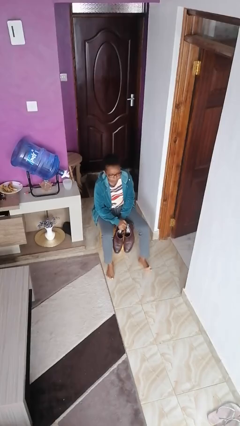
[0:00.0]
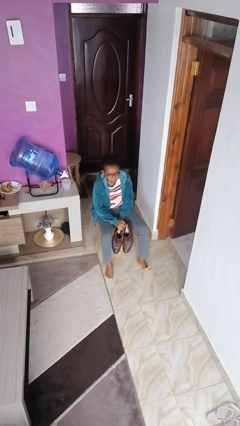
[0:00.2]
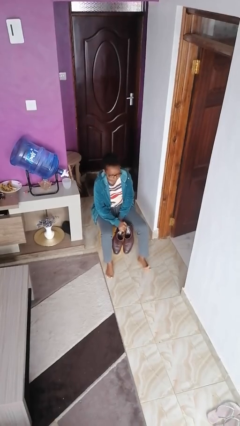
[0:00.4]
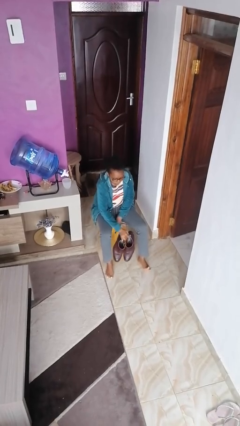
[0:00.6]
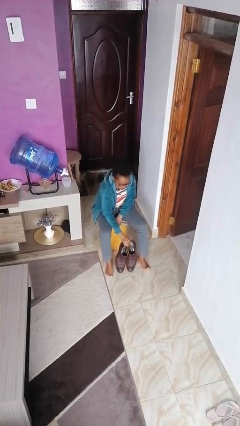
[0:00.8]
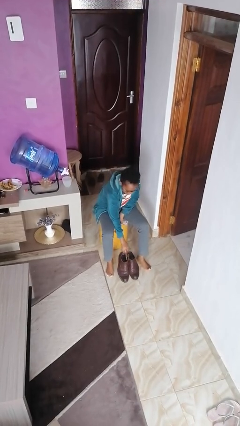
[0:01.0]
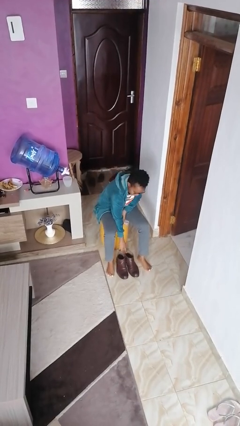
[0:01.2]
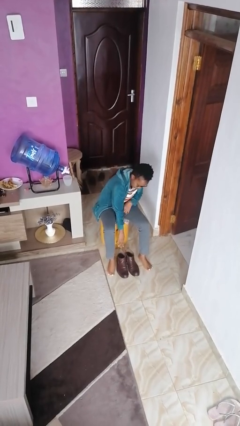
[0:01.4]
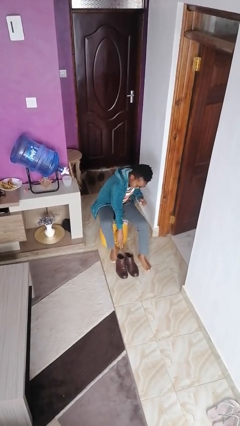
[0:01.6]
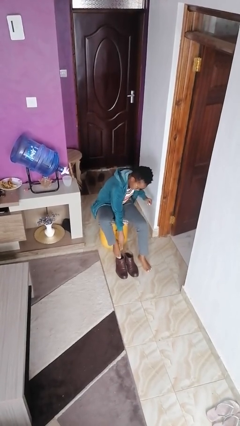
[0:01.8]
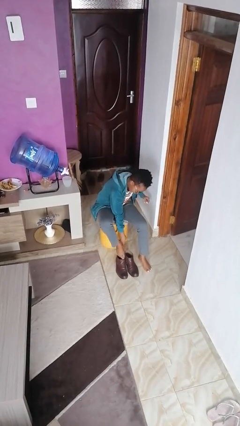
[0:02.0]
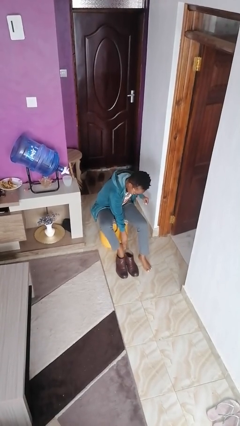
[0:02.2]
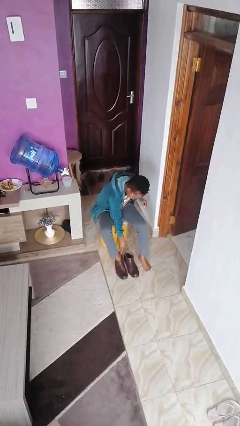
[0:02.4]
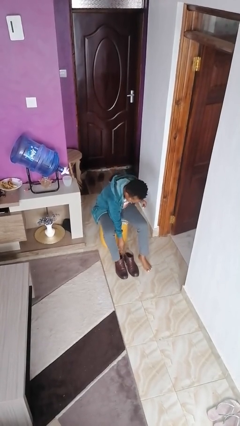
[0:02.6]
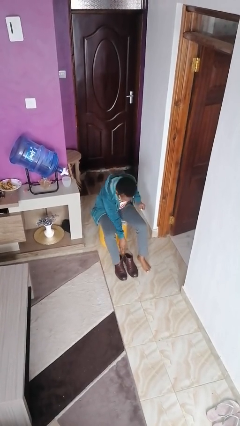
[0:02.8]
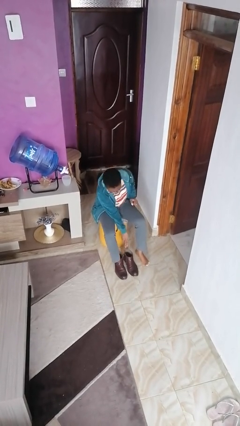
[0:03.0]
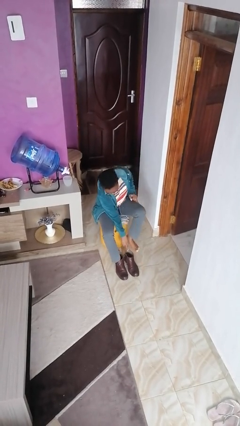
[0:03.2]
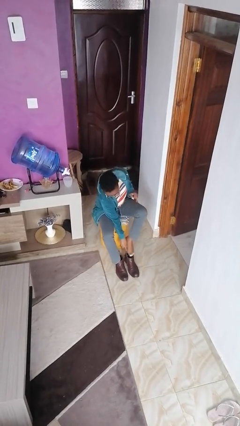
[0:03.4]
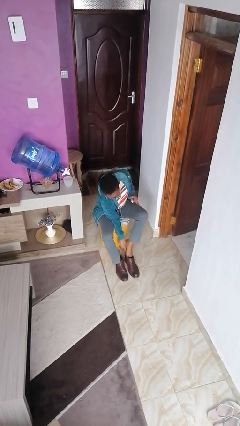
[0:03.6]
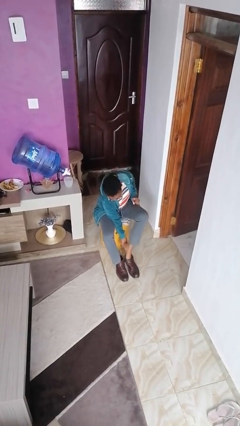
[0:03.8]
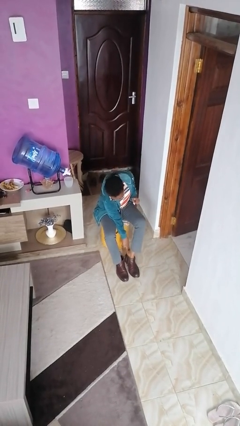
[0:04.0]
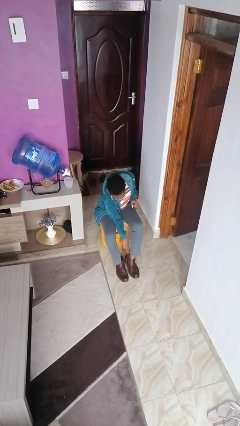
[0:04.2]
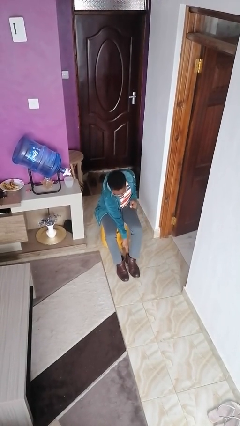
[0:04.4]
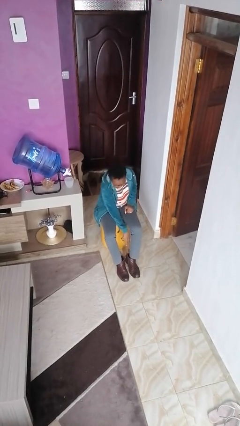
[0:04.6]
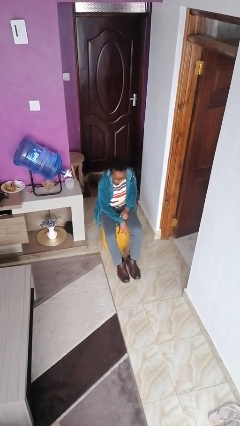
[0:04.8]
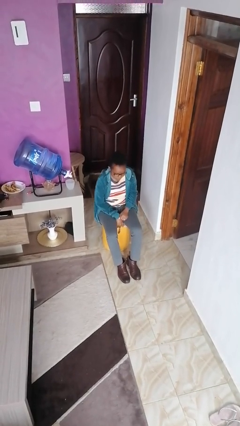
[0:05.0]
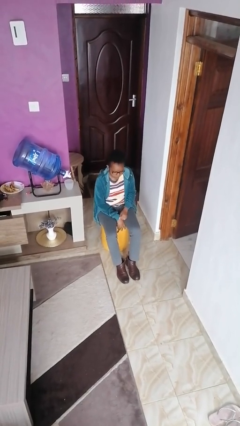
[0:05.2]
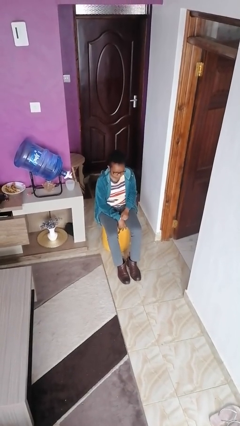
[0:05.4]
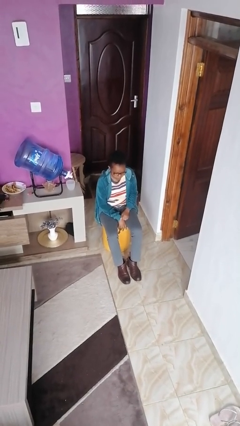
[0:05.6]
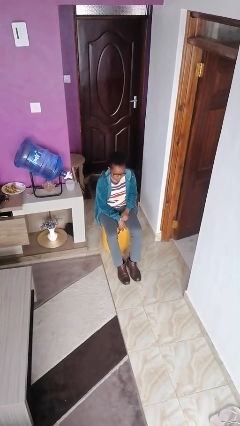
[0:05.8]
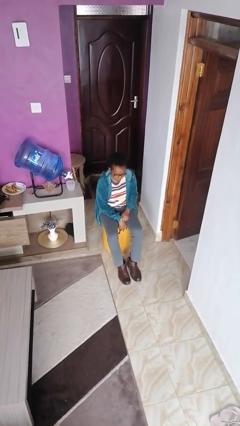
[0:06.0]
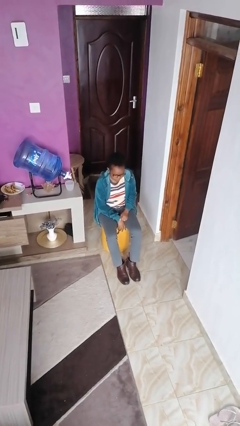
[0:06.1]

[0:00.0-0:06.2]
person puts on boots

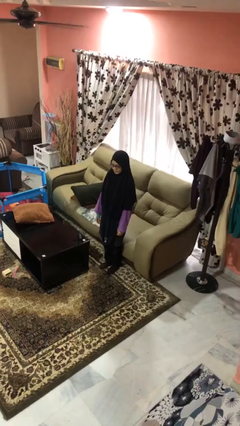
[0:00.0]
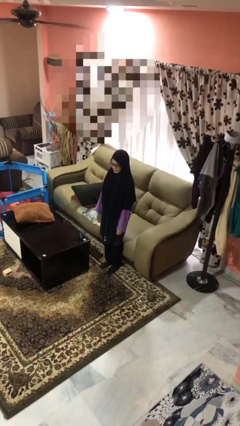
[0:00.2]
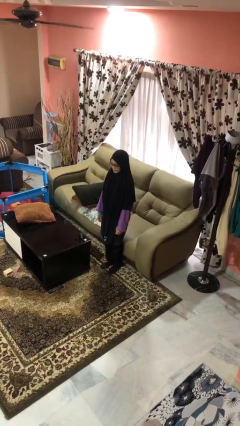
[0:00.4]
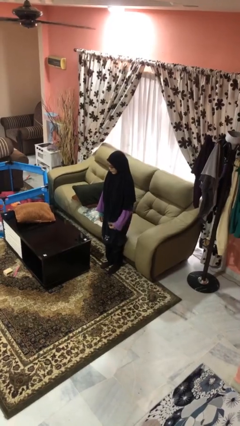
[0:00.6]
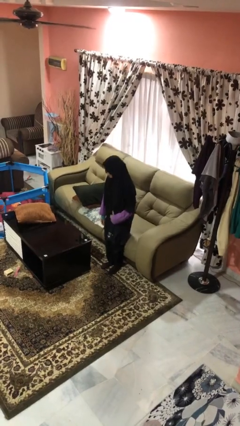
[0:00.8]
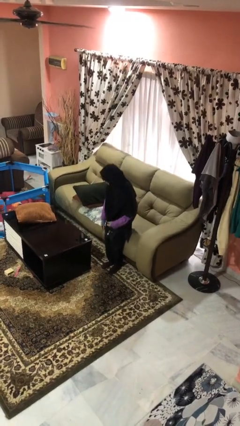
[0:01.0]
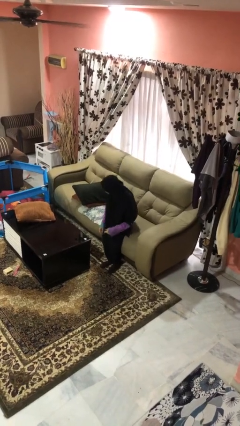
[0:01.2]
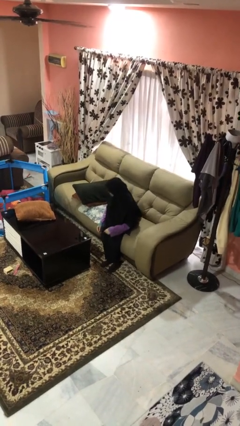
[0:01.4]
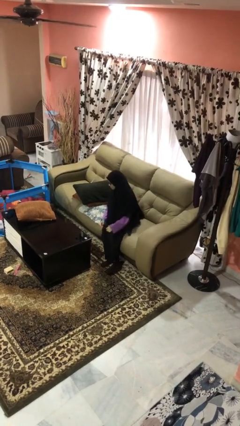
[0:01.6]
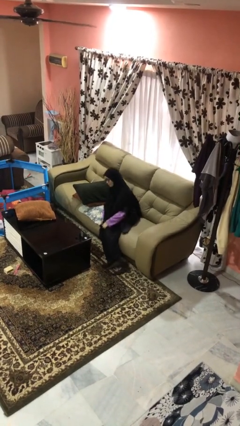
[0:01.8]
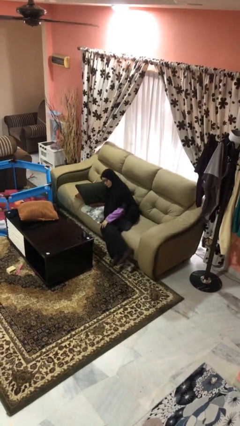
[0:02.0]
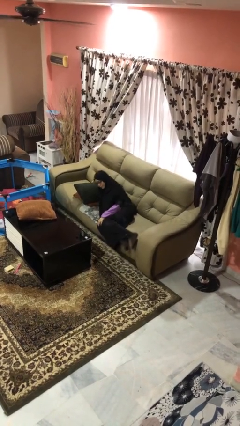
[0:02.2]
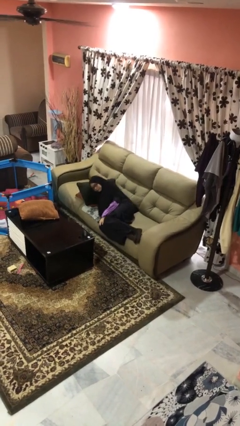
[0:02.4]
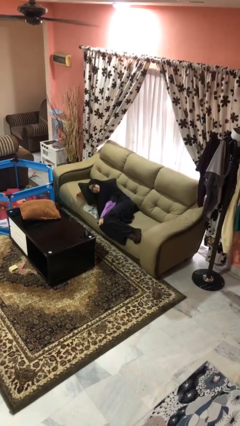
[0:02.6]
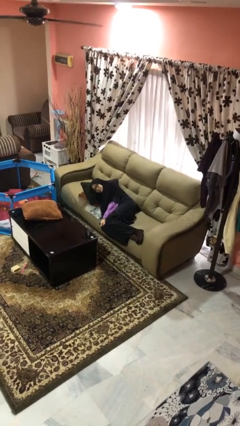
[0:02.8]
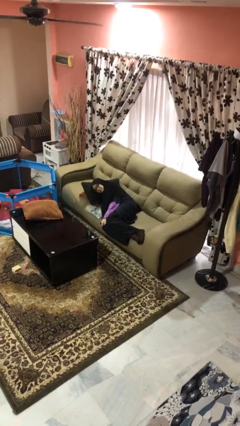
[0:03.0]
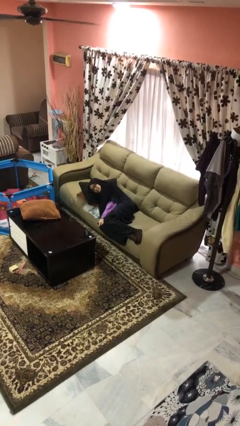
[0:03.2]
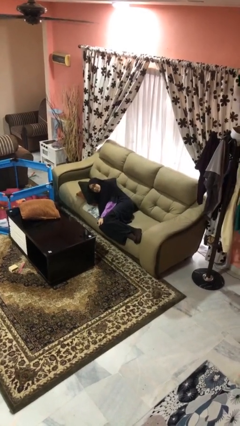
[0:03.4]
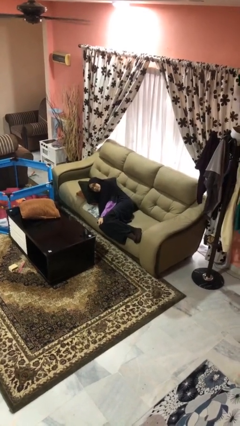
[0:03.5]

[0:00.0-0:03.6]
person lies down on couch

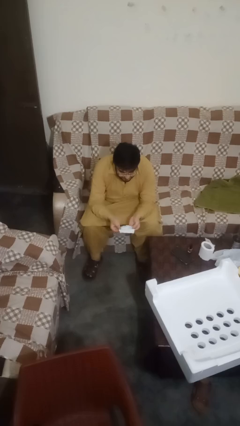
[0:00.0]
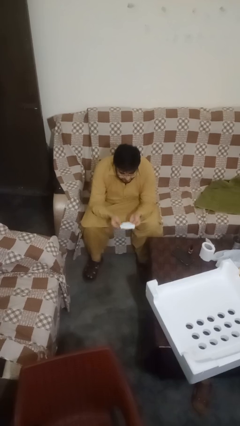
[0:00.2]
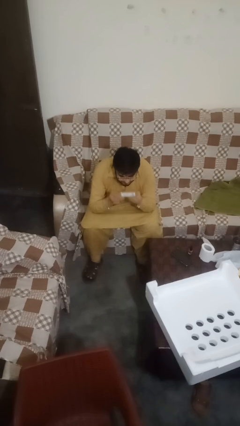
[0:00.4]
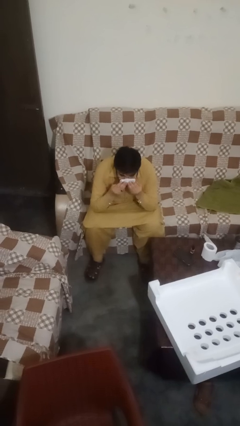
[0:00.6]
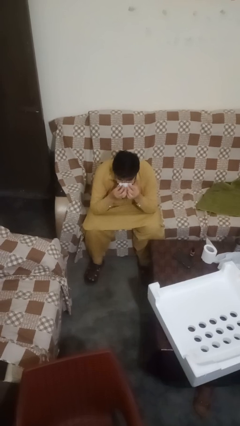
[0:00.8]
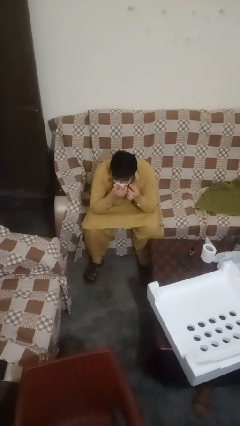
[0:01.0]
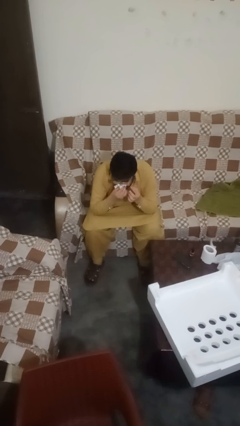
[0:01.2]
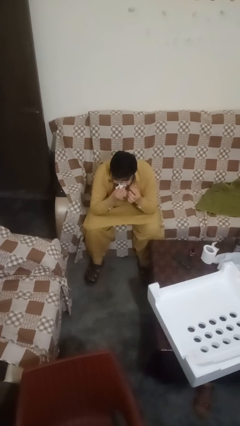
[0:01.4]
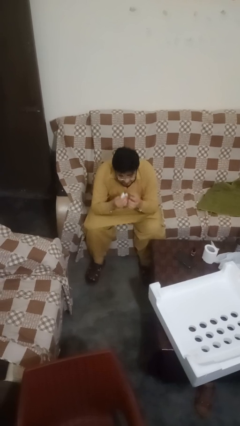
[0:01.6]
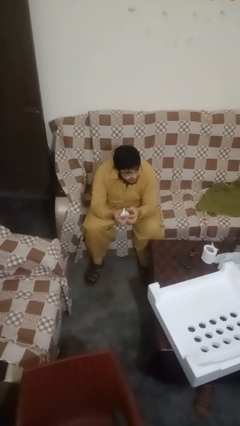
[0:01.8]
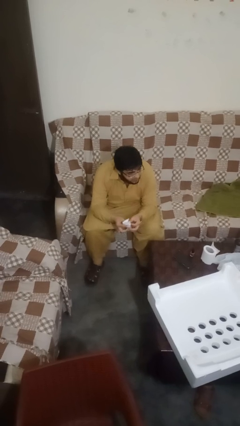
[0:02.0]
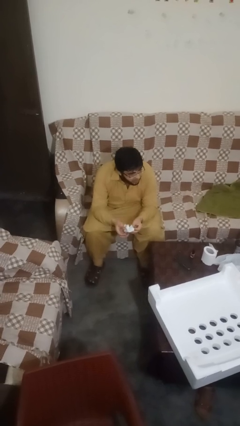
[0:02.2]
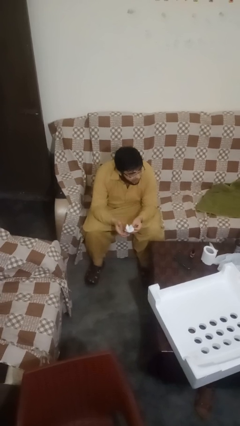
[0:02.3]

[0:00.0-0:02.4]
person blows nose

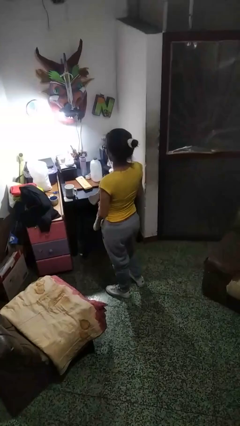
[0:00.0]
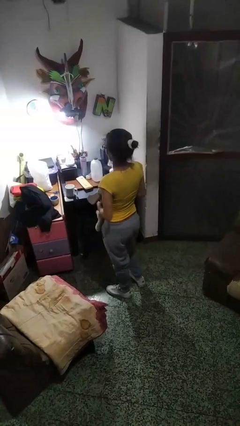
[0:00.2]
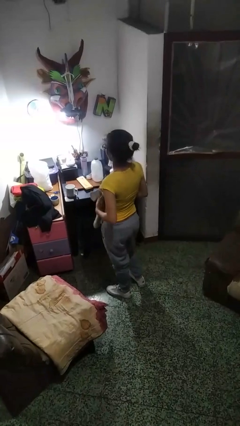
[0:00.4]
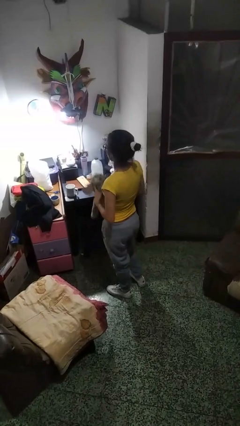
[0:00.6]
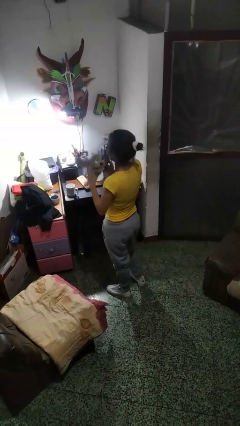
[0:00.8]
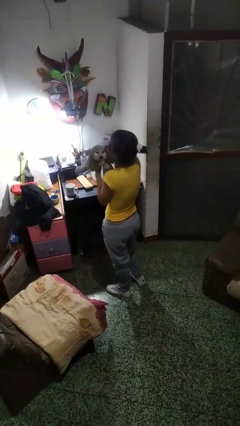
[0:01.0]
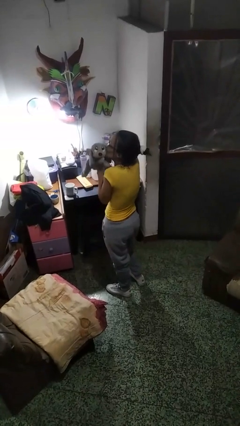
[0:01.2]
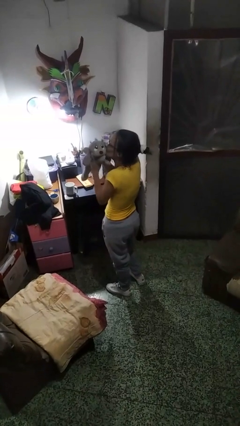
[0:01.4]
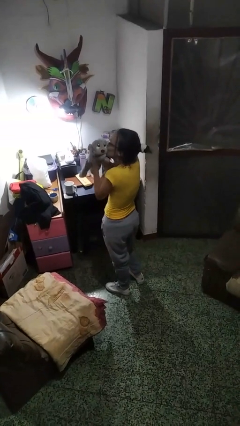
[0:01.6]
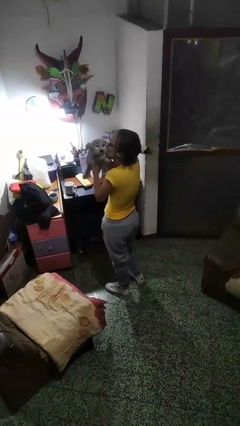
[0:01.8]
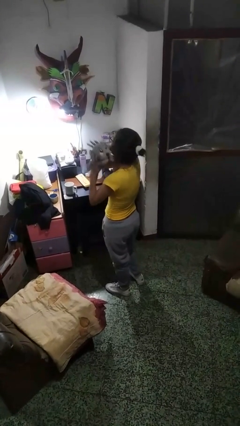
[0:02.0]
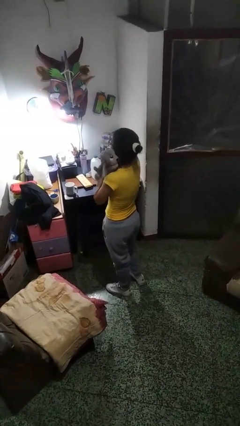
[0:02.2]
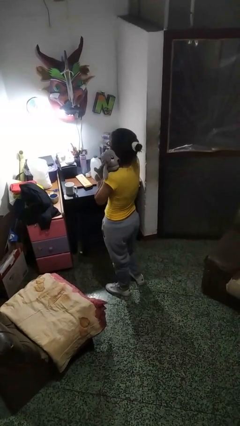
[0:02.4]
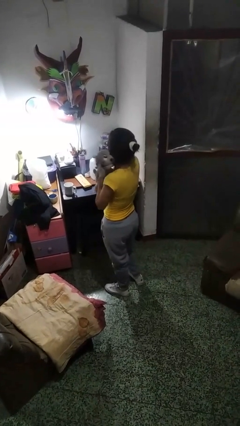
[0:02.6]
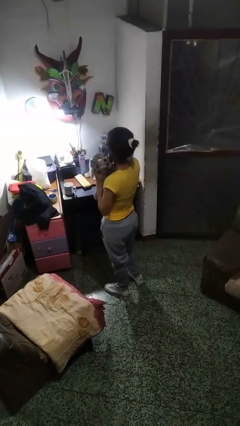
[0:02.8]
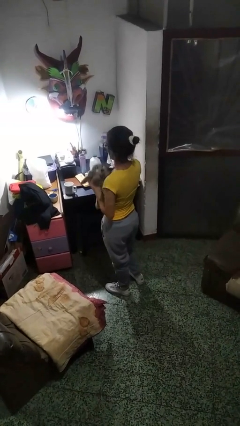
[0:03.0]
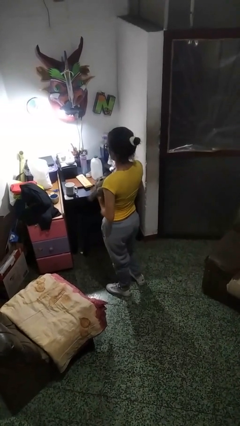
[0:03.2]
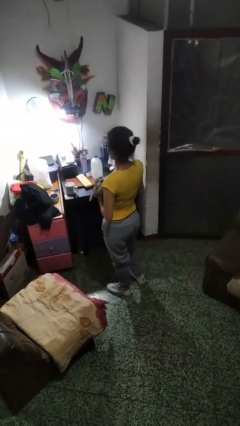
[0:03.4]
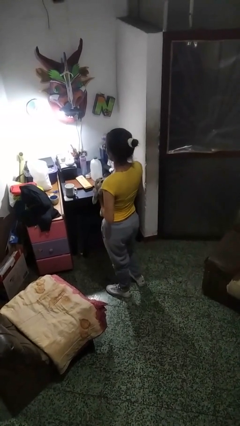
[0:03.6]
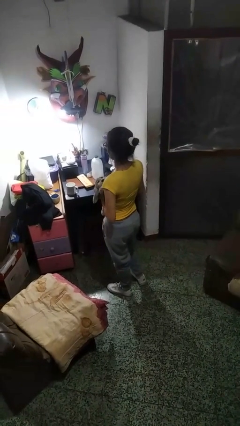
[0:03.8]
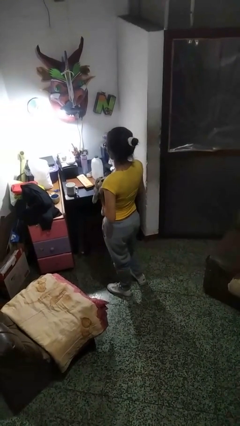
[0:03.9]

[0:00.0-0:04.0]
person hugs stuffed animal

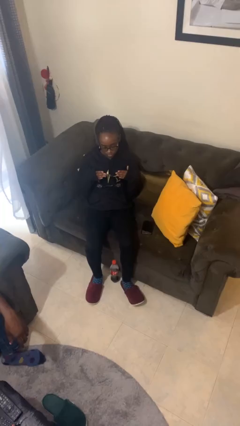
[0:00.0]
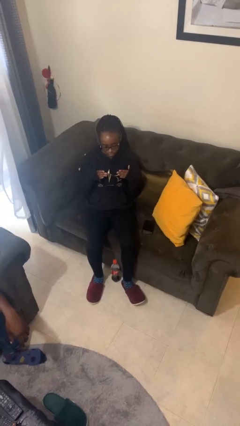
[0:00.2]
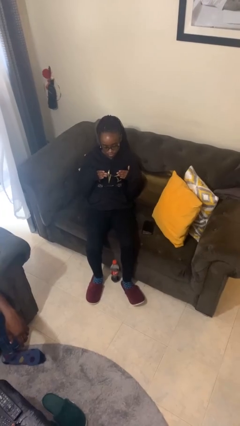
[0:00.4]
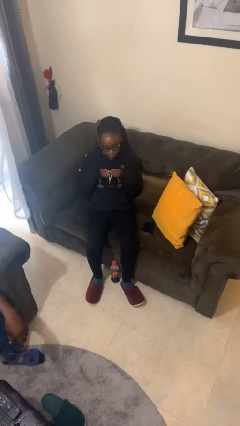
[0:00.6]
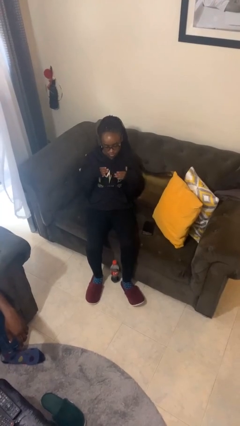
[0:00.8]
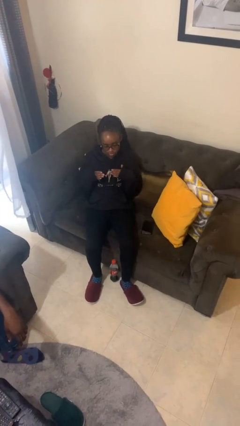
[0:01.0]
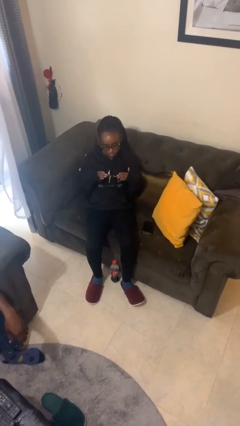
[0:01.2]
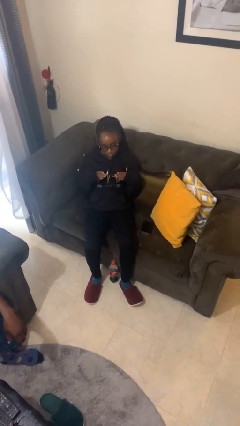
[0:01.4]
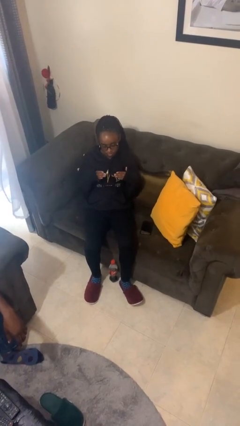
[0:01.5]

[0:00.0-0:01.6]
person drums on chest
